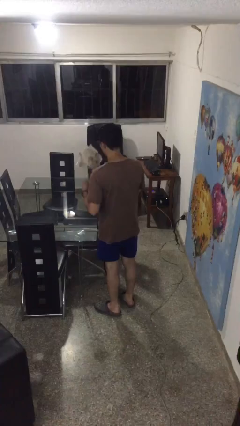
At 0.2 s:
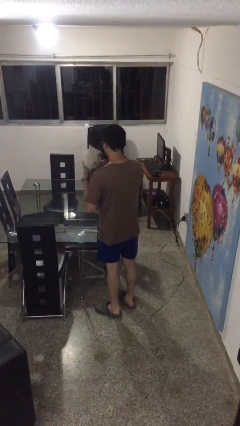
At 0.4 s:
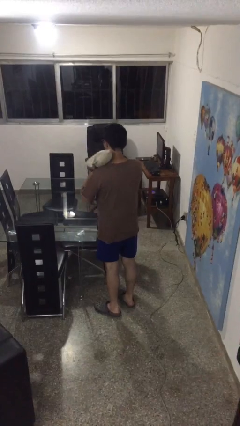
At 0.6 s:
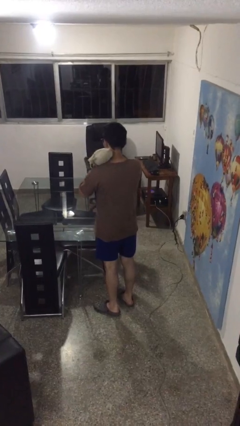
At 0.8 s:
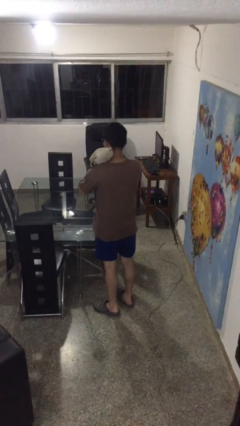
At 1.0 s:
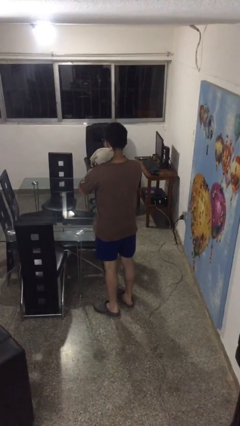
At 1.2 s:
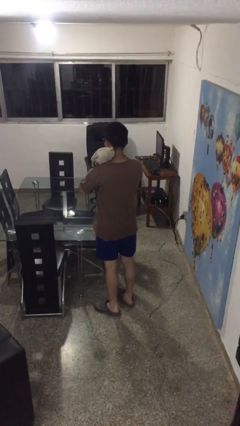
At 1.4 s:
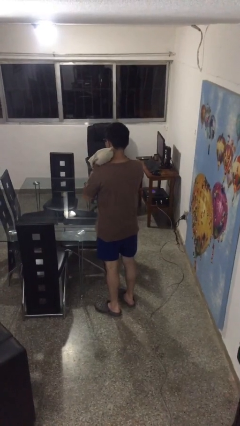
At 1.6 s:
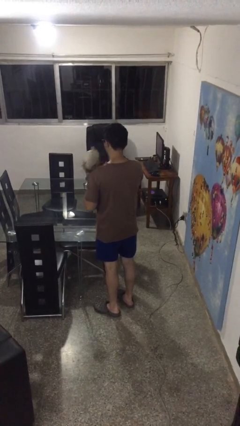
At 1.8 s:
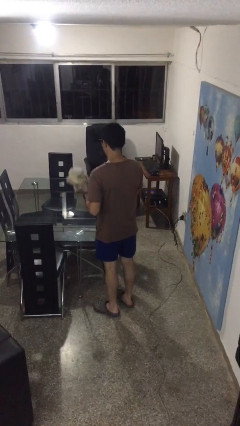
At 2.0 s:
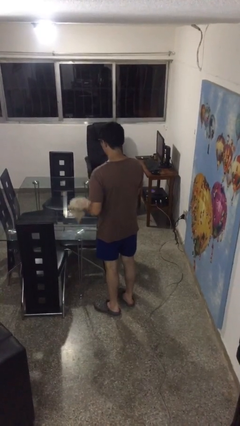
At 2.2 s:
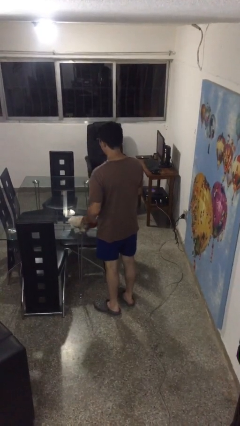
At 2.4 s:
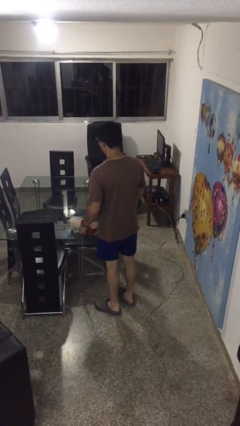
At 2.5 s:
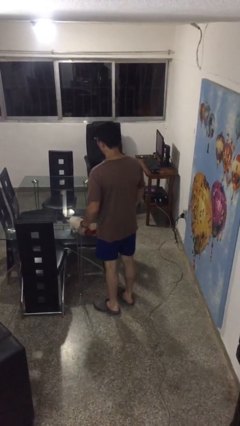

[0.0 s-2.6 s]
person hugs stuffed animal

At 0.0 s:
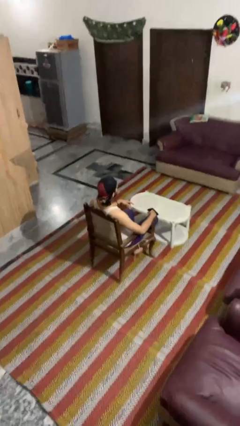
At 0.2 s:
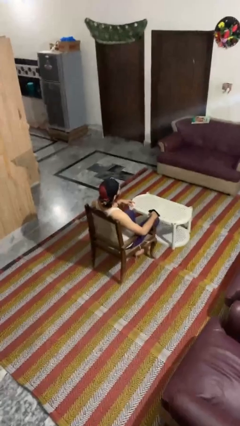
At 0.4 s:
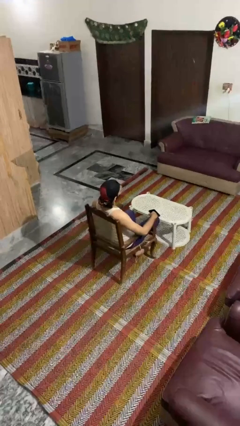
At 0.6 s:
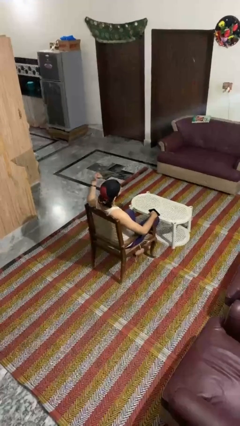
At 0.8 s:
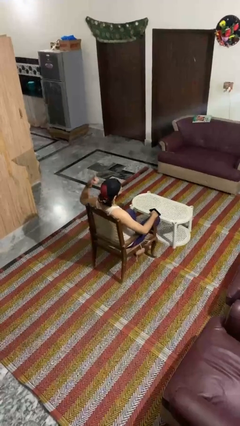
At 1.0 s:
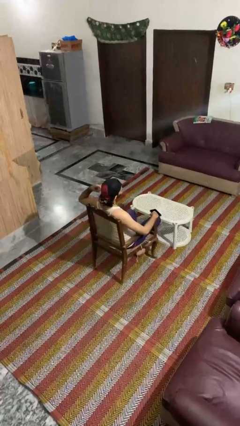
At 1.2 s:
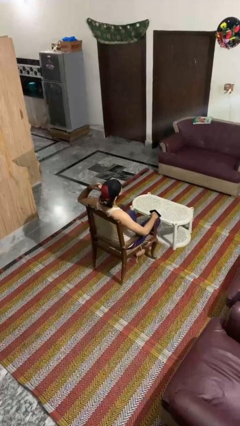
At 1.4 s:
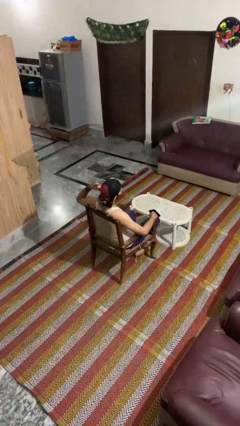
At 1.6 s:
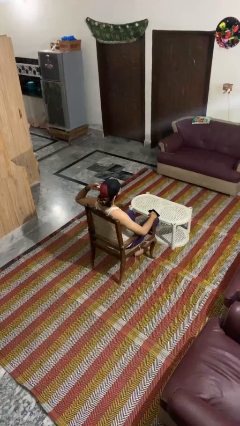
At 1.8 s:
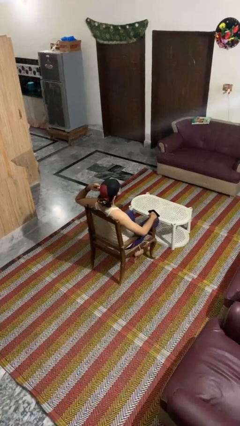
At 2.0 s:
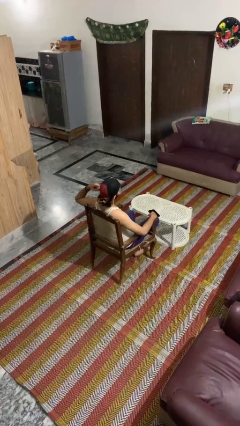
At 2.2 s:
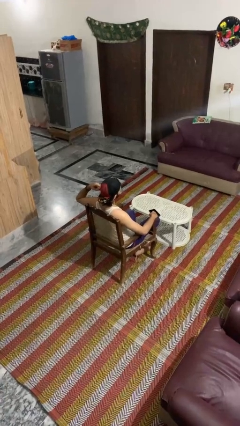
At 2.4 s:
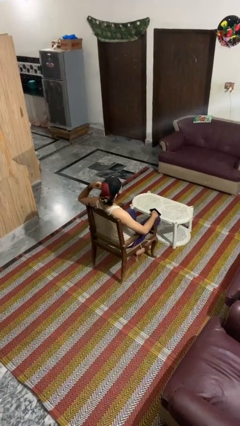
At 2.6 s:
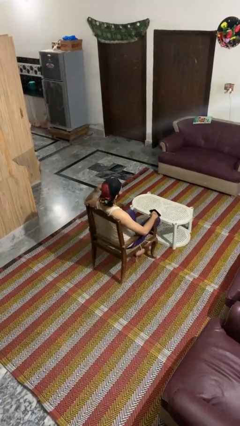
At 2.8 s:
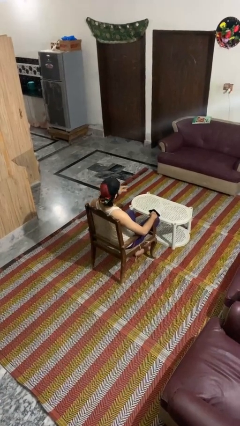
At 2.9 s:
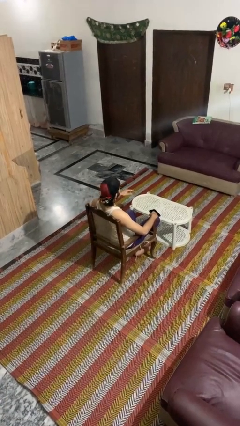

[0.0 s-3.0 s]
person gestures listen closely

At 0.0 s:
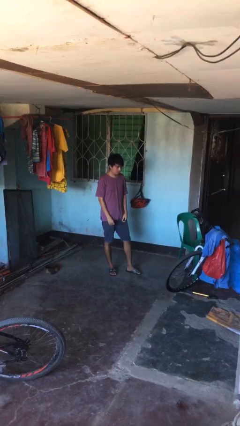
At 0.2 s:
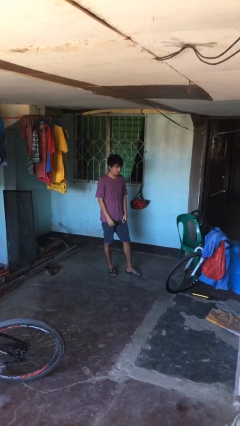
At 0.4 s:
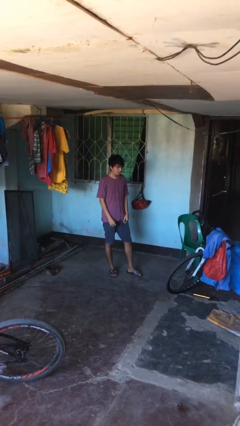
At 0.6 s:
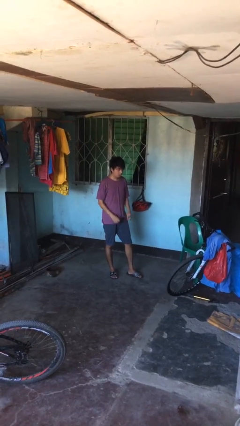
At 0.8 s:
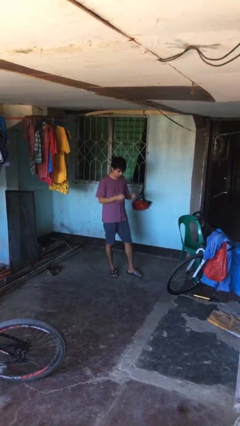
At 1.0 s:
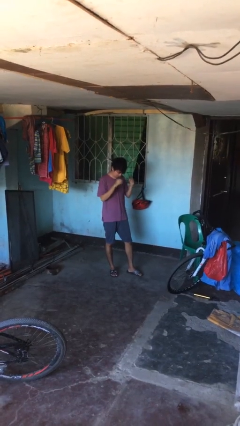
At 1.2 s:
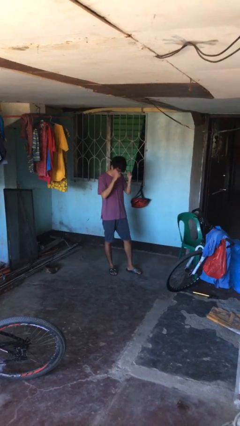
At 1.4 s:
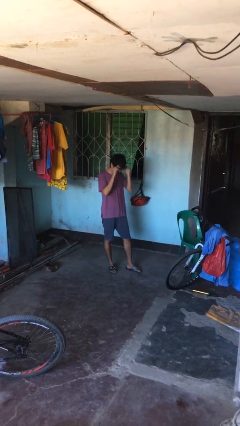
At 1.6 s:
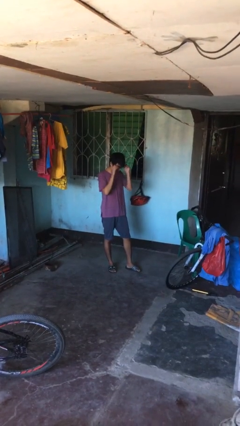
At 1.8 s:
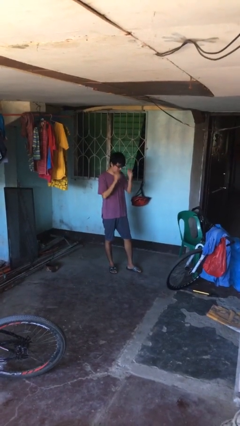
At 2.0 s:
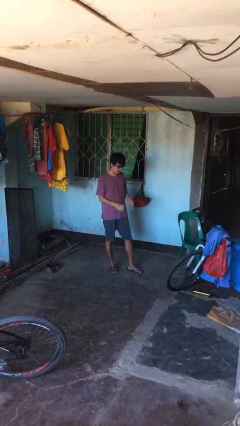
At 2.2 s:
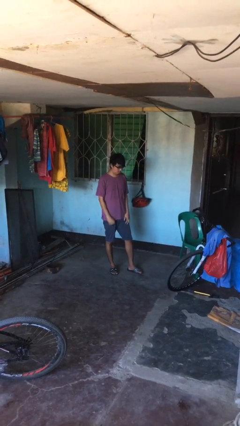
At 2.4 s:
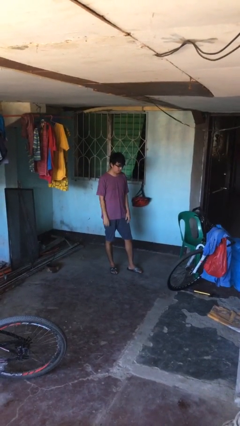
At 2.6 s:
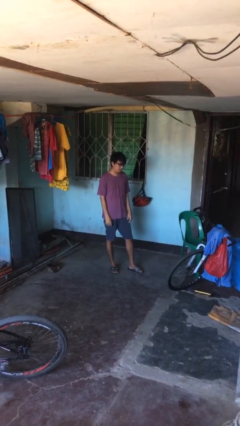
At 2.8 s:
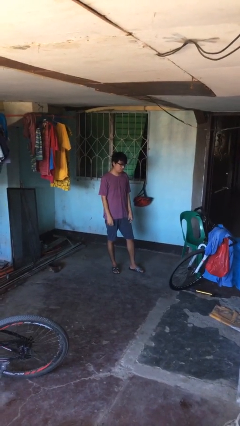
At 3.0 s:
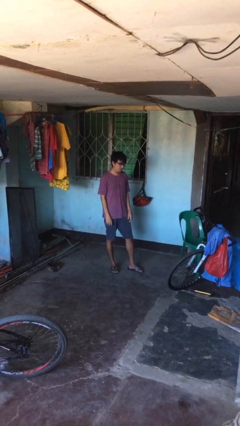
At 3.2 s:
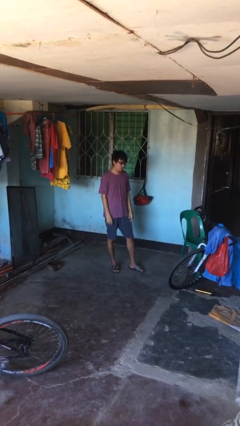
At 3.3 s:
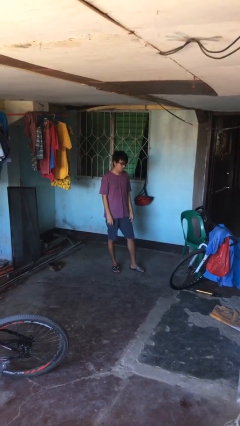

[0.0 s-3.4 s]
person puts on glasses

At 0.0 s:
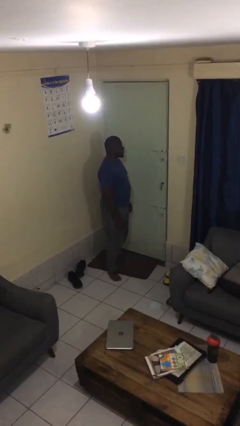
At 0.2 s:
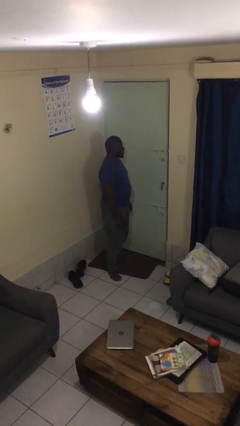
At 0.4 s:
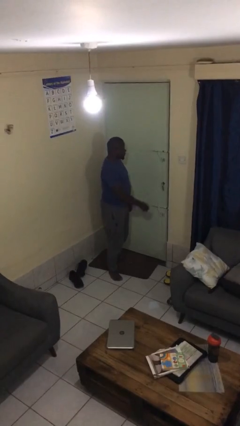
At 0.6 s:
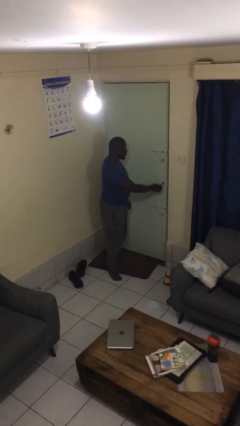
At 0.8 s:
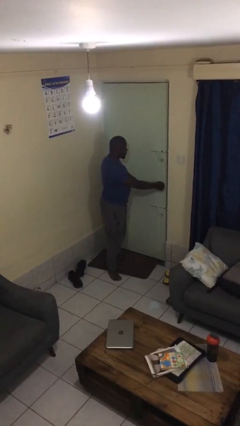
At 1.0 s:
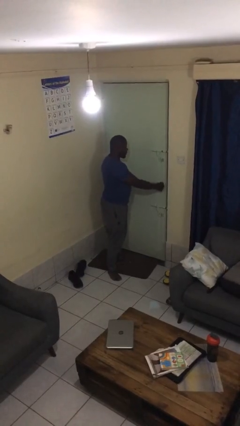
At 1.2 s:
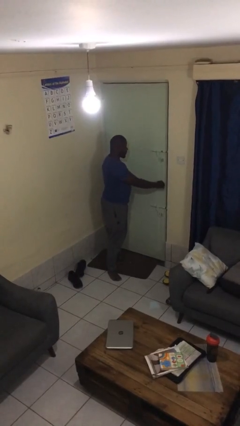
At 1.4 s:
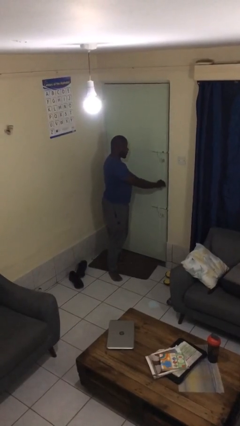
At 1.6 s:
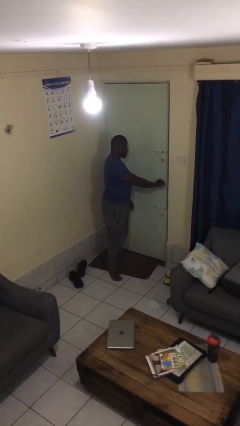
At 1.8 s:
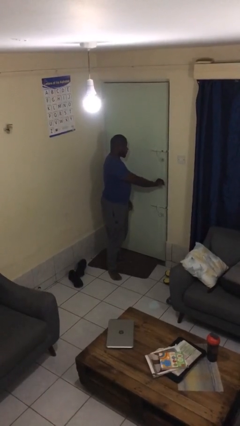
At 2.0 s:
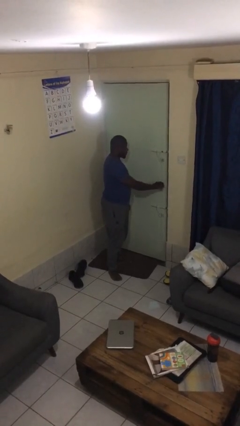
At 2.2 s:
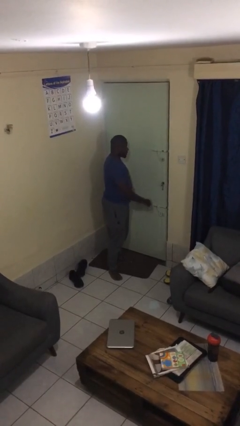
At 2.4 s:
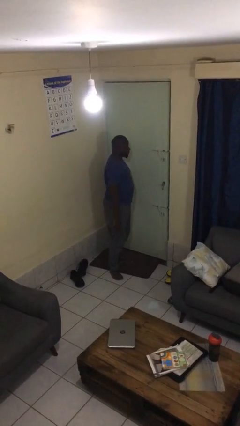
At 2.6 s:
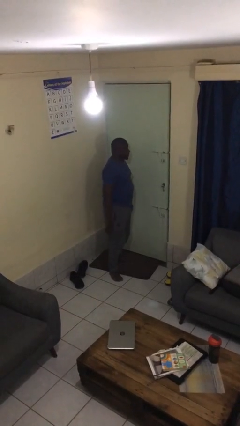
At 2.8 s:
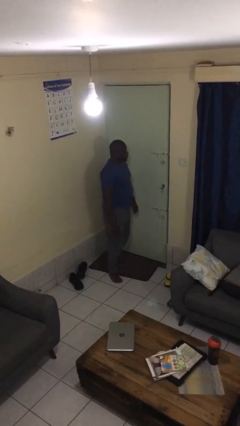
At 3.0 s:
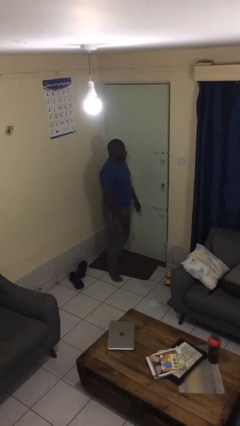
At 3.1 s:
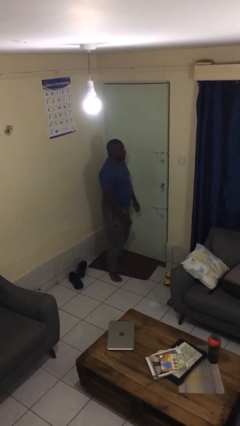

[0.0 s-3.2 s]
person unlocks door with keys

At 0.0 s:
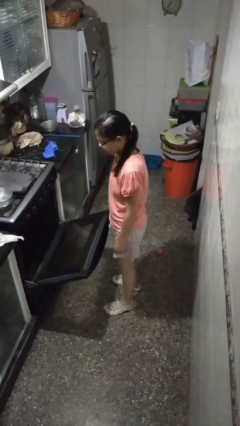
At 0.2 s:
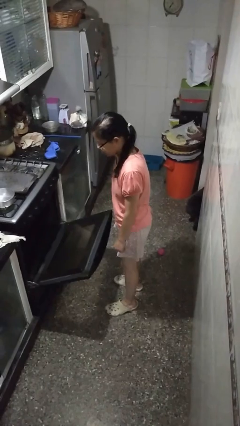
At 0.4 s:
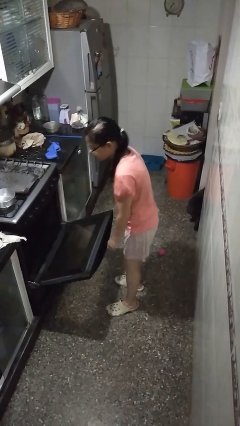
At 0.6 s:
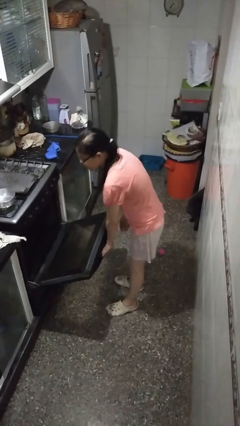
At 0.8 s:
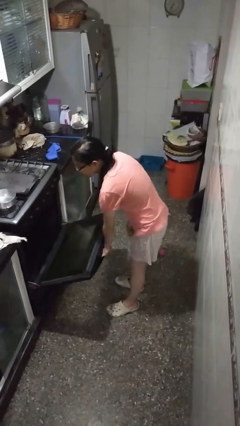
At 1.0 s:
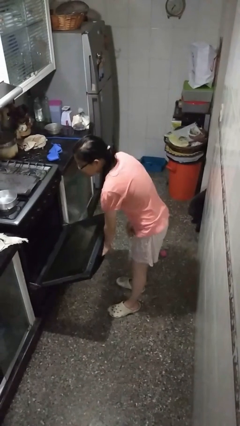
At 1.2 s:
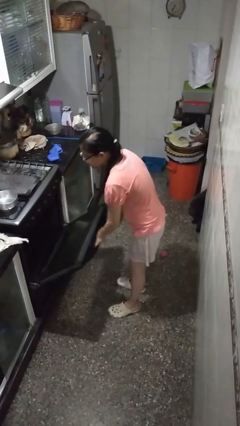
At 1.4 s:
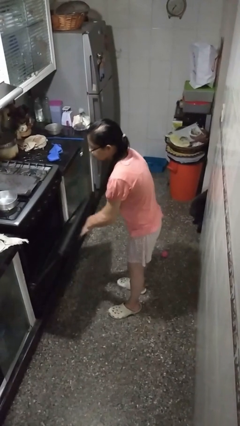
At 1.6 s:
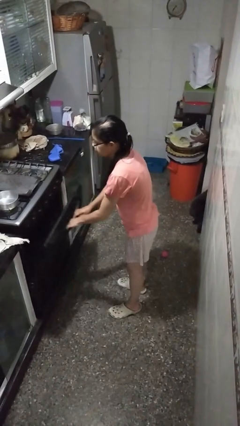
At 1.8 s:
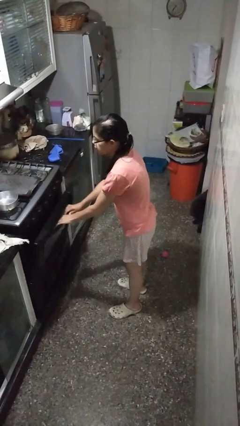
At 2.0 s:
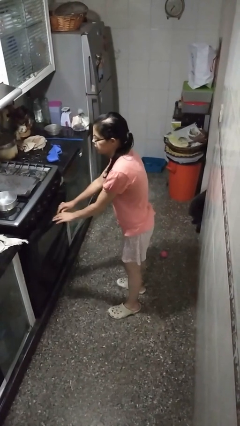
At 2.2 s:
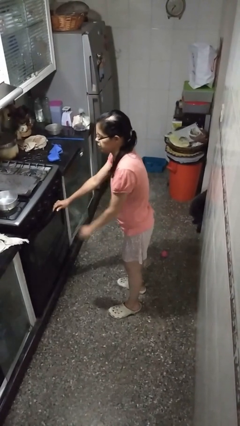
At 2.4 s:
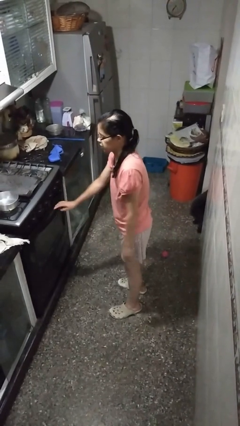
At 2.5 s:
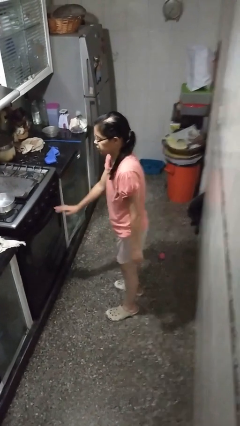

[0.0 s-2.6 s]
person closes oven door

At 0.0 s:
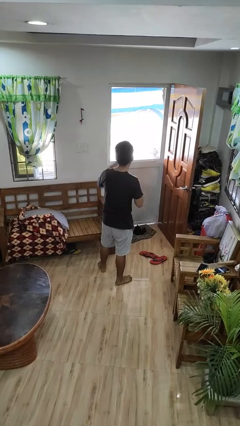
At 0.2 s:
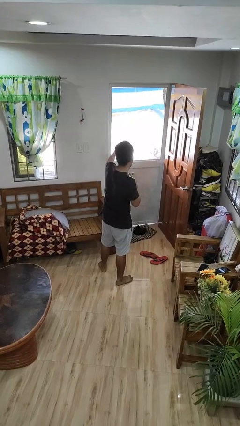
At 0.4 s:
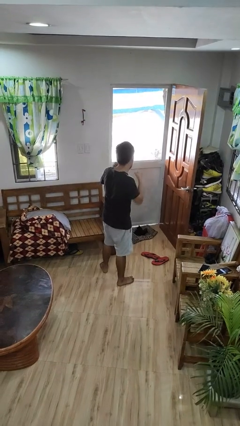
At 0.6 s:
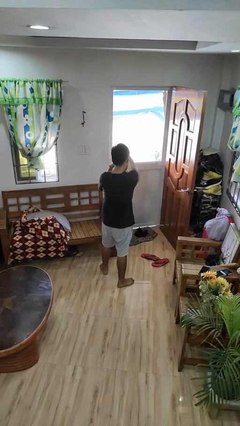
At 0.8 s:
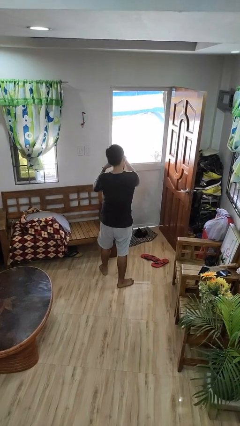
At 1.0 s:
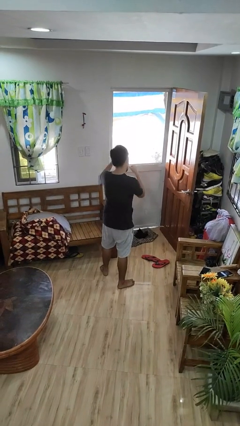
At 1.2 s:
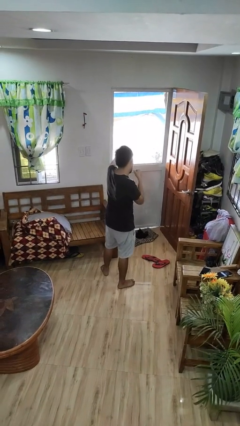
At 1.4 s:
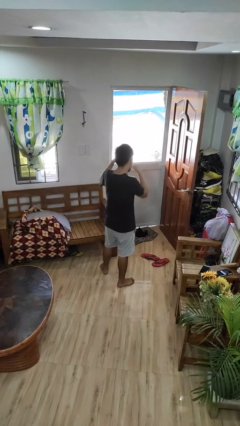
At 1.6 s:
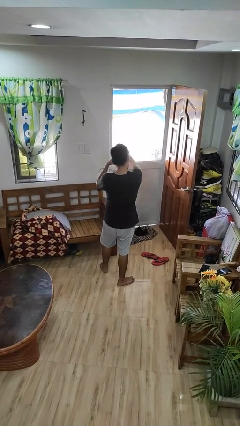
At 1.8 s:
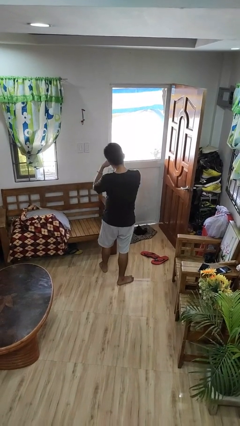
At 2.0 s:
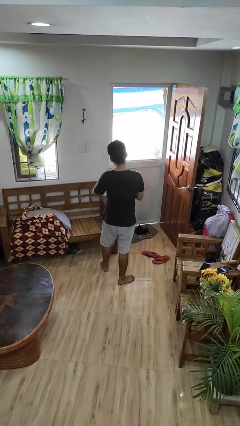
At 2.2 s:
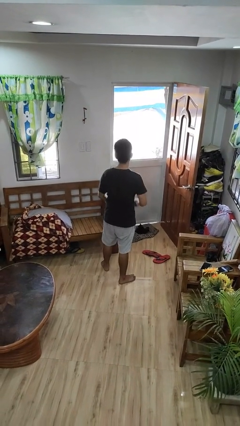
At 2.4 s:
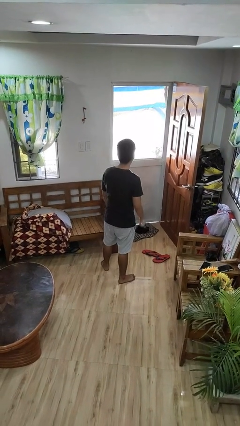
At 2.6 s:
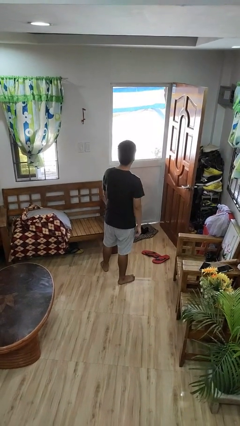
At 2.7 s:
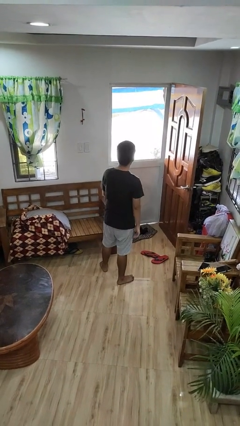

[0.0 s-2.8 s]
person punches
